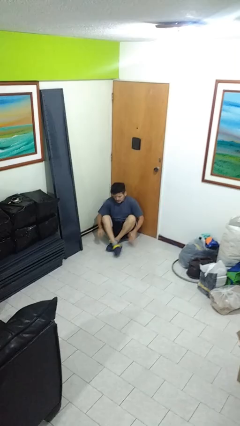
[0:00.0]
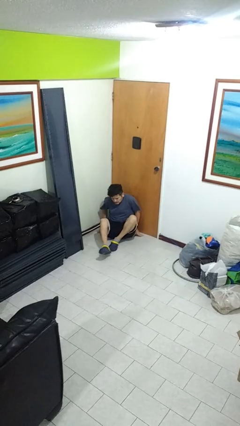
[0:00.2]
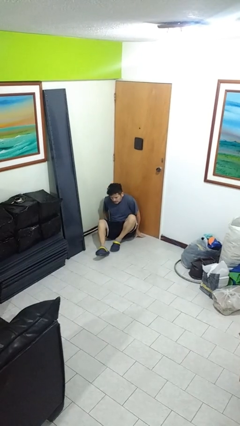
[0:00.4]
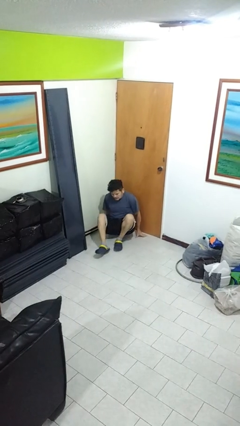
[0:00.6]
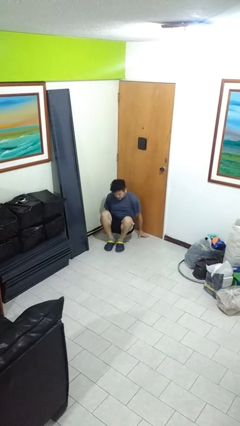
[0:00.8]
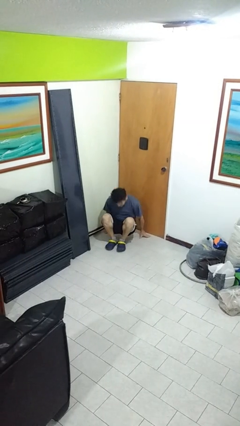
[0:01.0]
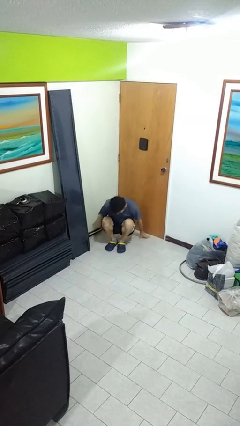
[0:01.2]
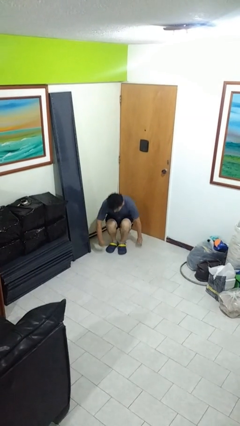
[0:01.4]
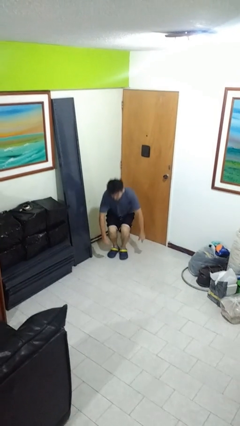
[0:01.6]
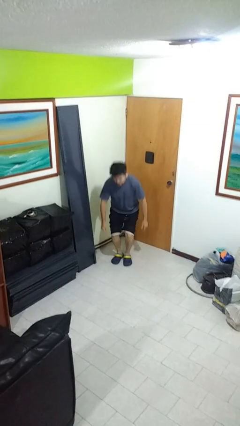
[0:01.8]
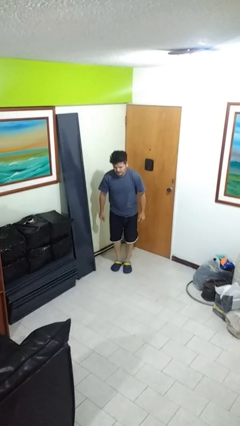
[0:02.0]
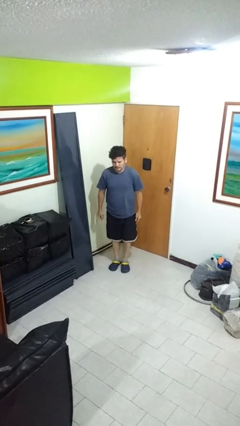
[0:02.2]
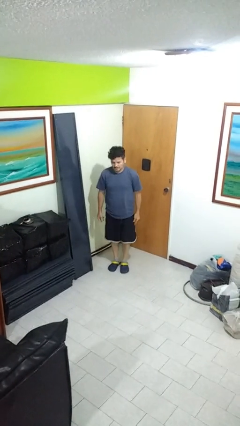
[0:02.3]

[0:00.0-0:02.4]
person stands up from floor

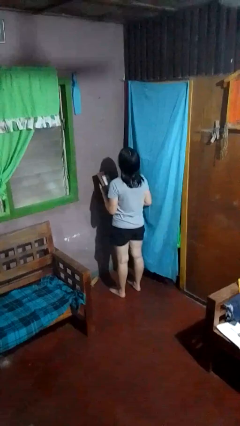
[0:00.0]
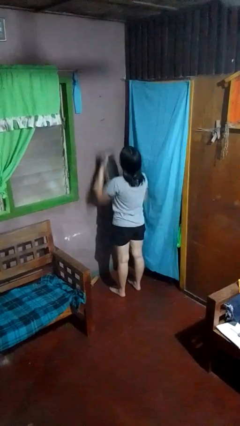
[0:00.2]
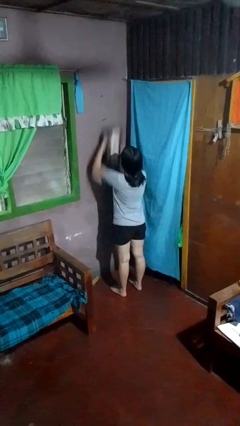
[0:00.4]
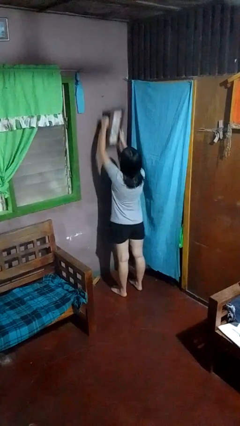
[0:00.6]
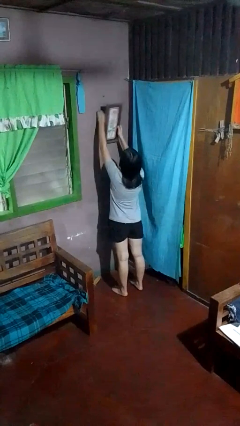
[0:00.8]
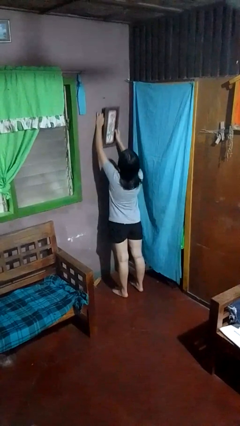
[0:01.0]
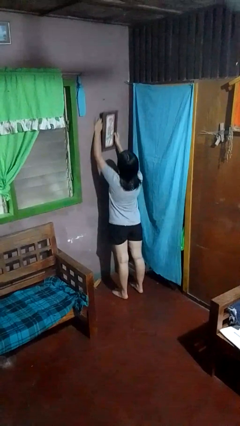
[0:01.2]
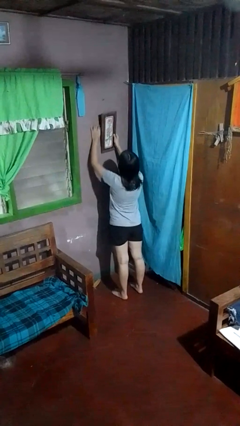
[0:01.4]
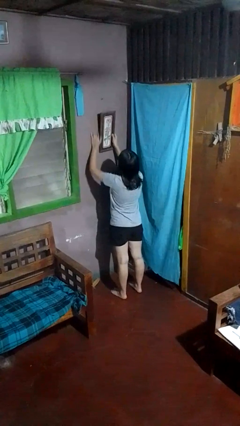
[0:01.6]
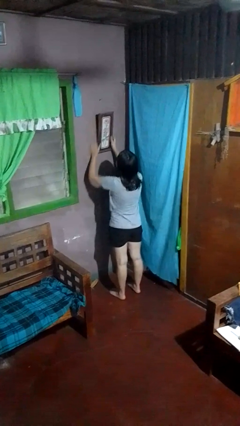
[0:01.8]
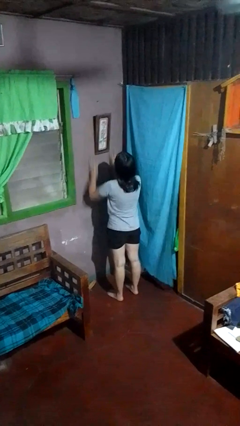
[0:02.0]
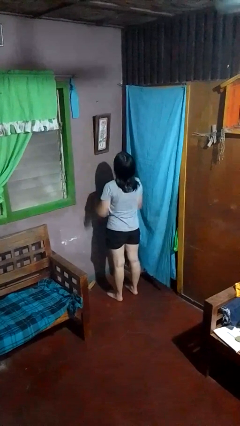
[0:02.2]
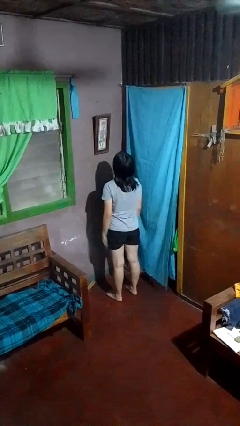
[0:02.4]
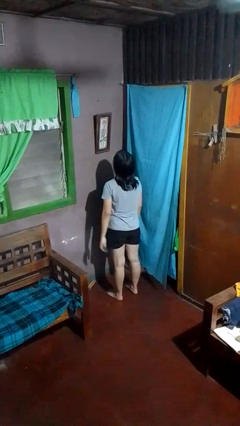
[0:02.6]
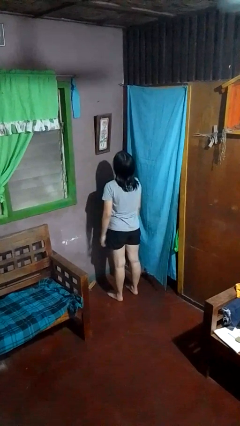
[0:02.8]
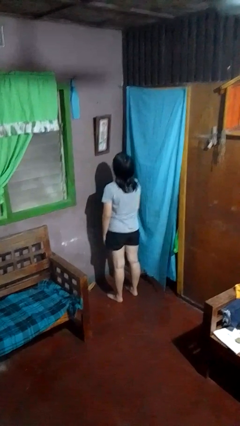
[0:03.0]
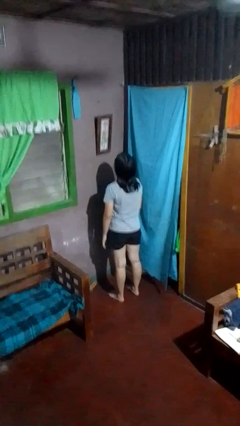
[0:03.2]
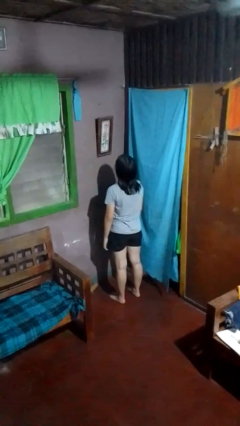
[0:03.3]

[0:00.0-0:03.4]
person puts up picture frame

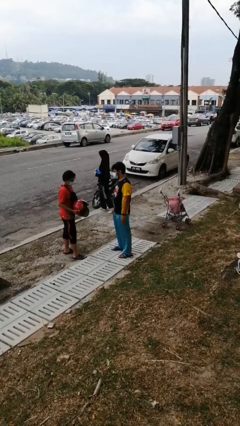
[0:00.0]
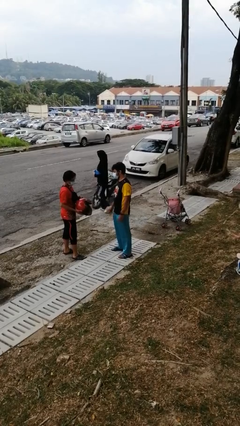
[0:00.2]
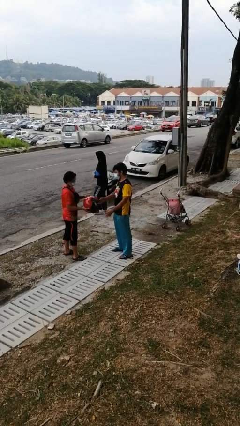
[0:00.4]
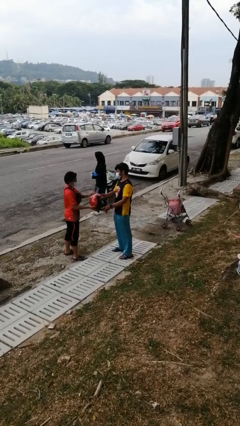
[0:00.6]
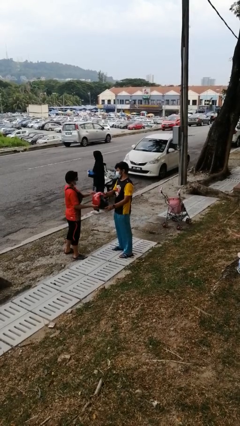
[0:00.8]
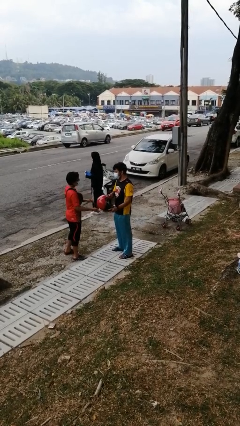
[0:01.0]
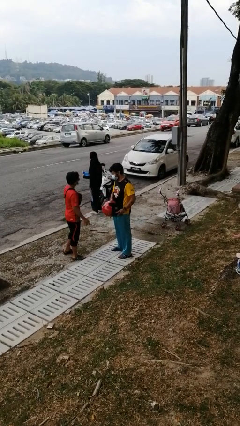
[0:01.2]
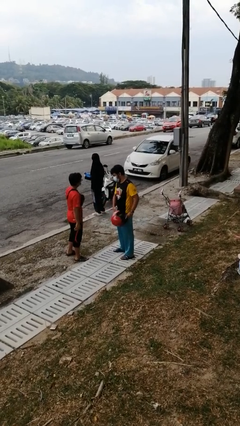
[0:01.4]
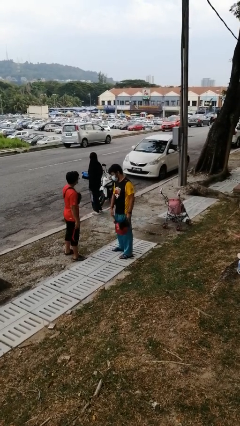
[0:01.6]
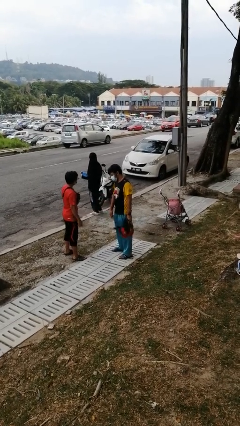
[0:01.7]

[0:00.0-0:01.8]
person transfers object to person

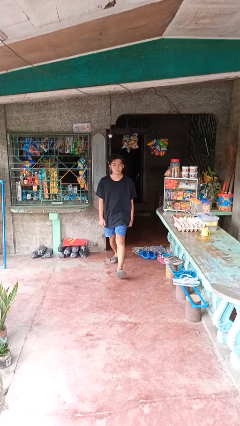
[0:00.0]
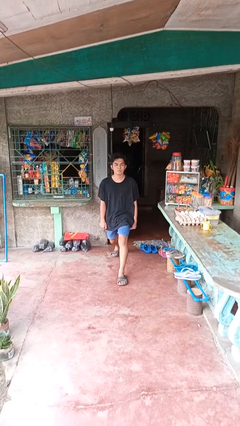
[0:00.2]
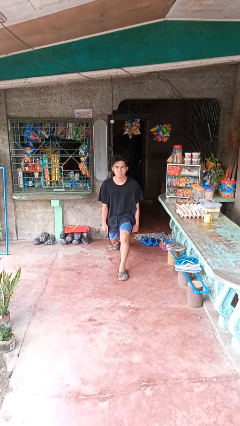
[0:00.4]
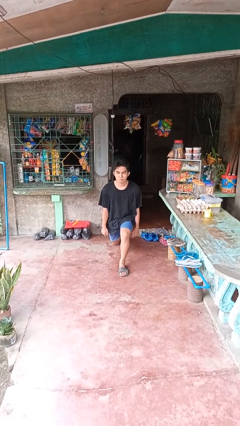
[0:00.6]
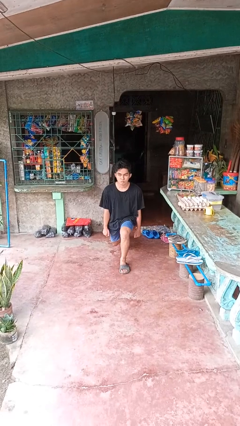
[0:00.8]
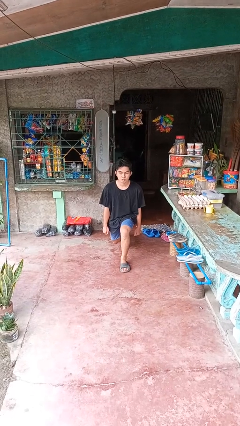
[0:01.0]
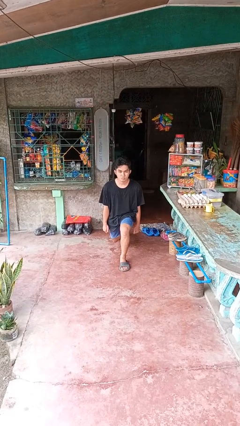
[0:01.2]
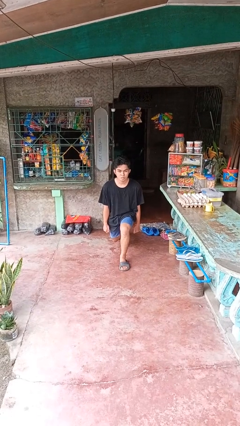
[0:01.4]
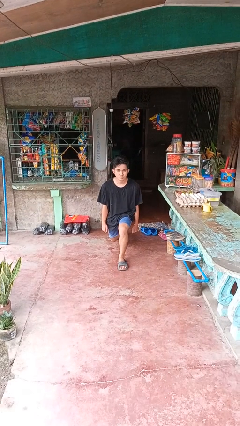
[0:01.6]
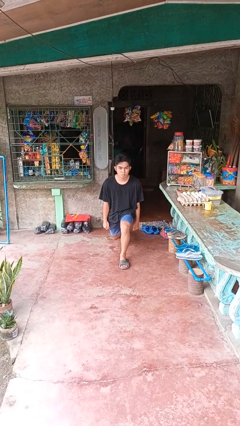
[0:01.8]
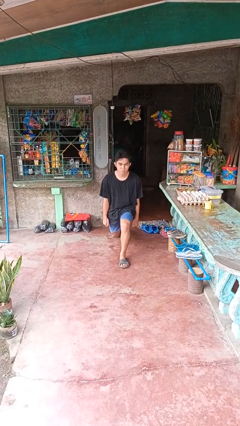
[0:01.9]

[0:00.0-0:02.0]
person exercises with lunges

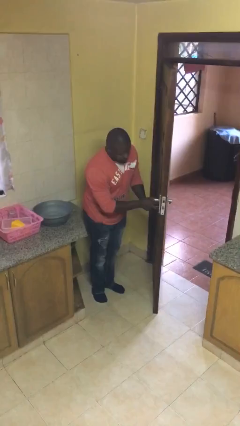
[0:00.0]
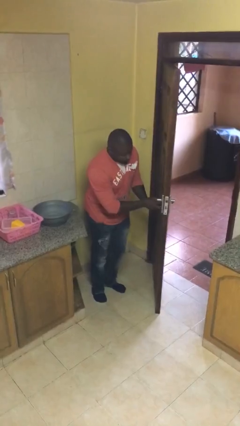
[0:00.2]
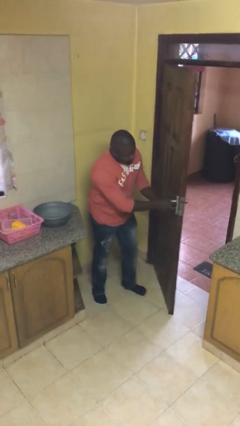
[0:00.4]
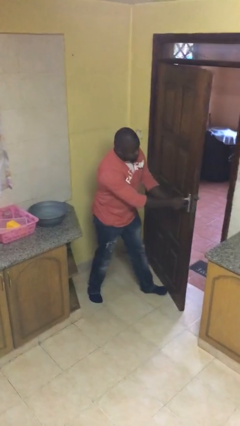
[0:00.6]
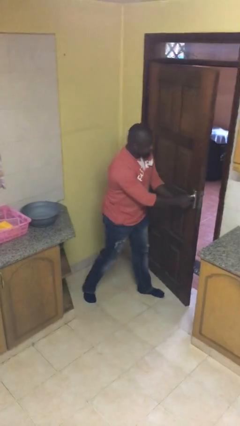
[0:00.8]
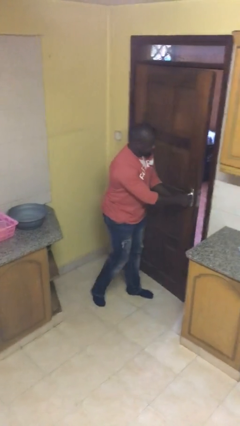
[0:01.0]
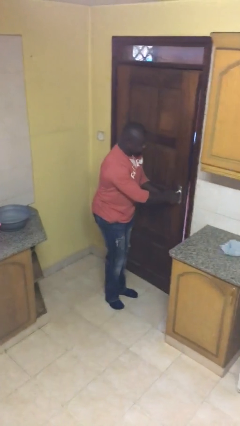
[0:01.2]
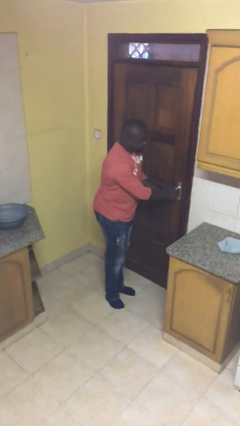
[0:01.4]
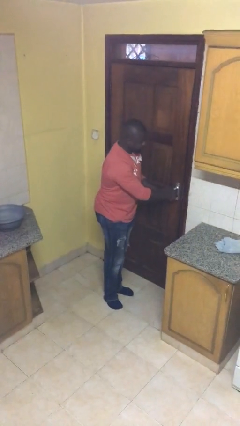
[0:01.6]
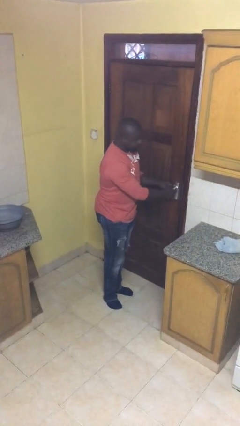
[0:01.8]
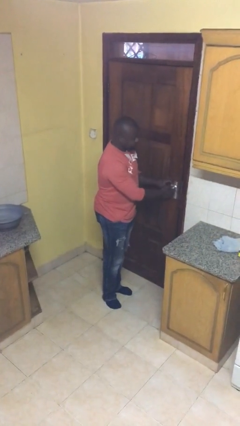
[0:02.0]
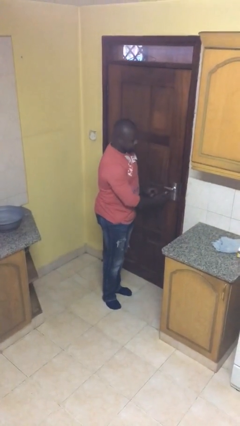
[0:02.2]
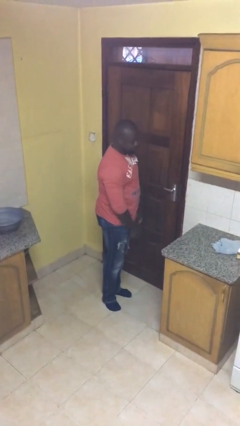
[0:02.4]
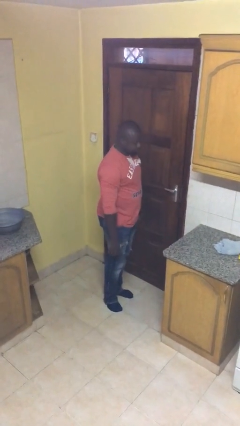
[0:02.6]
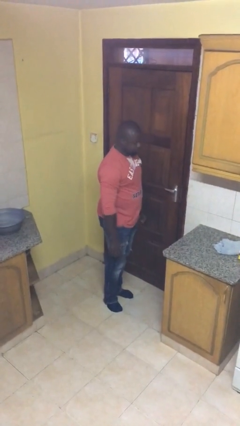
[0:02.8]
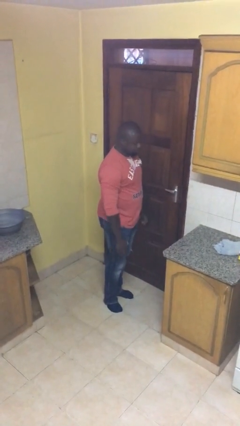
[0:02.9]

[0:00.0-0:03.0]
person closes facility door

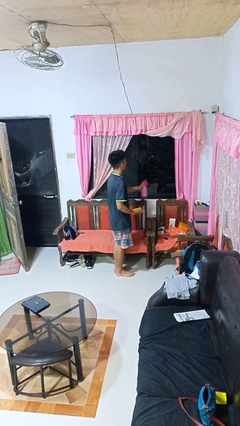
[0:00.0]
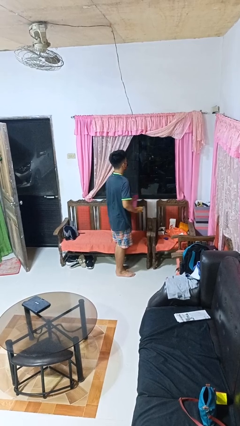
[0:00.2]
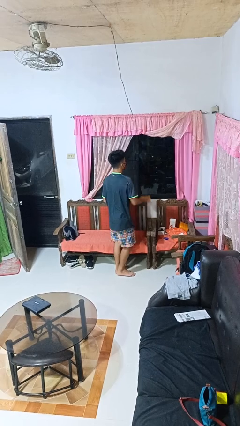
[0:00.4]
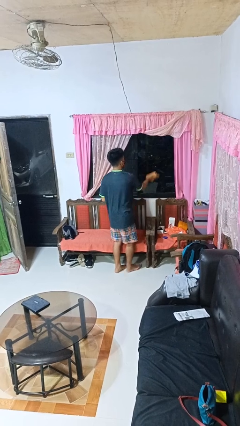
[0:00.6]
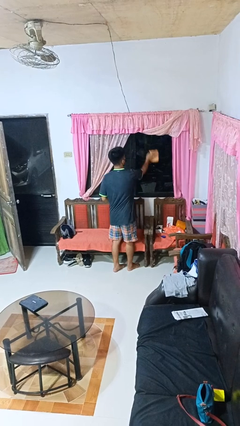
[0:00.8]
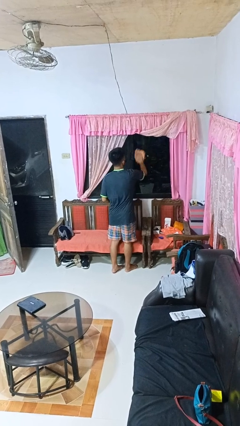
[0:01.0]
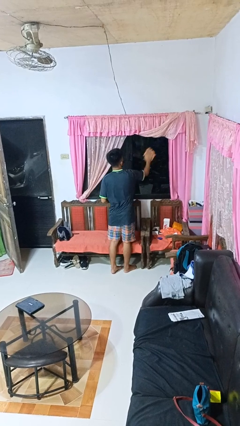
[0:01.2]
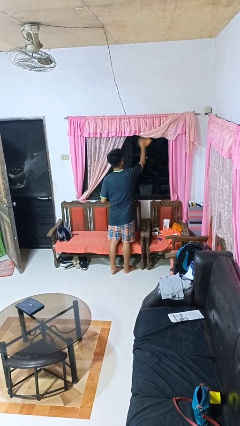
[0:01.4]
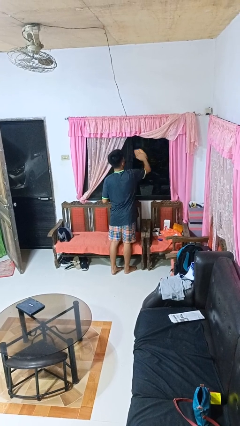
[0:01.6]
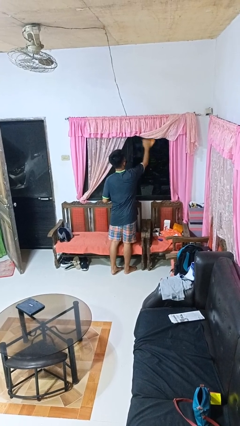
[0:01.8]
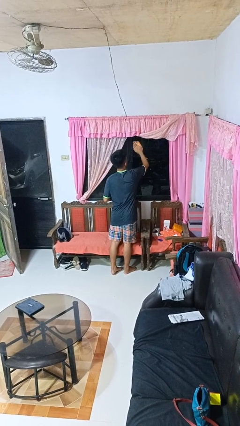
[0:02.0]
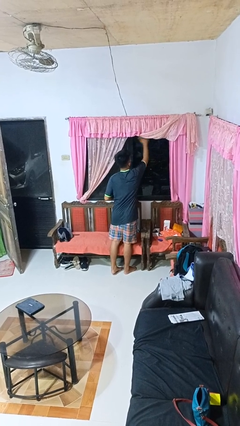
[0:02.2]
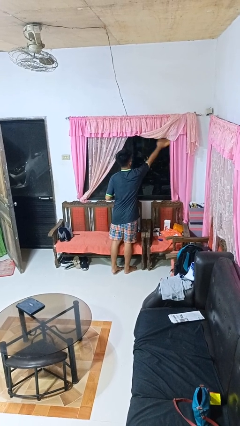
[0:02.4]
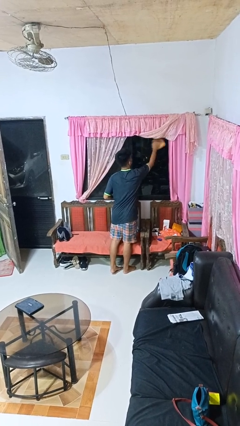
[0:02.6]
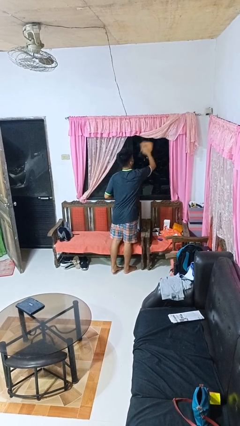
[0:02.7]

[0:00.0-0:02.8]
person washes window

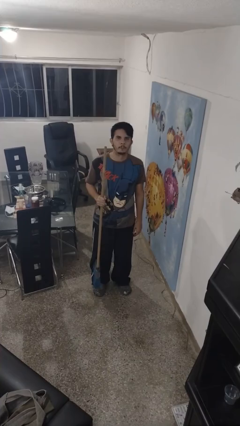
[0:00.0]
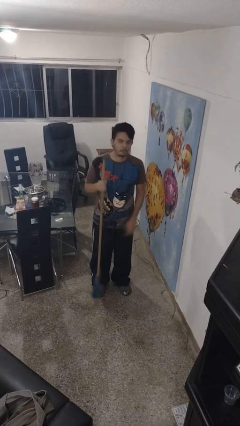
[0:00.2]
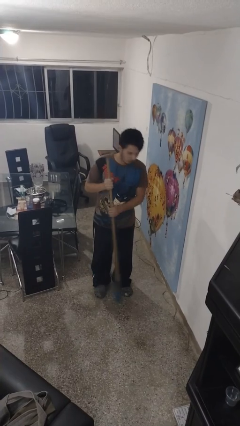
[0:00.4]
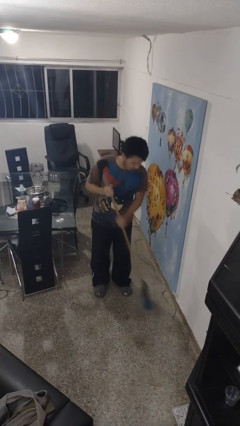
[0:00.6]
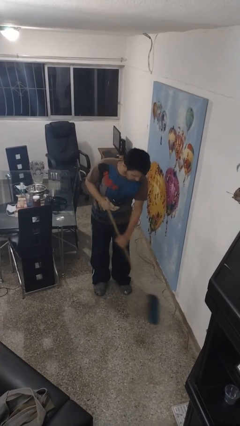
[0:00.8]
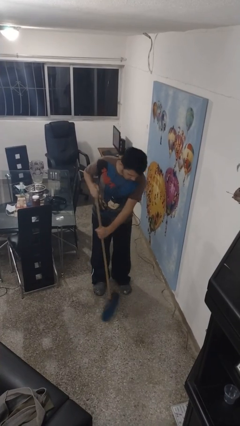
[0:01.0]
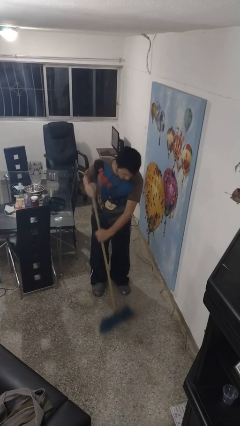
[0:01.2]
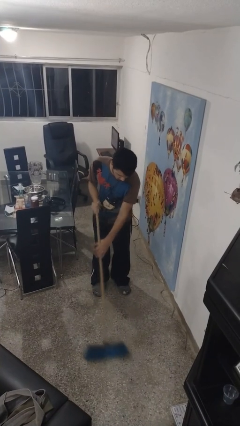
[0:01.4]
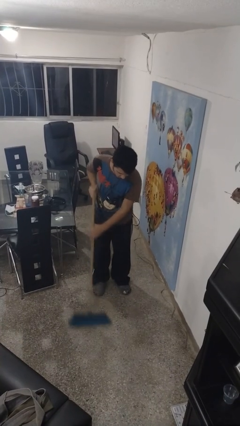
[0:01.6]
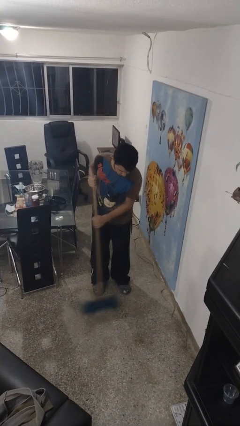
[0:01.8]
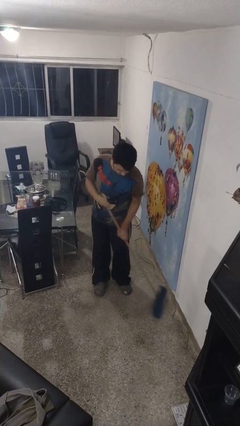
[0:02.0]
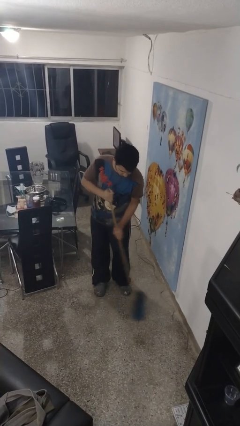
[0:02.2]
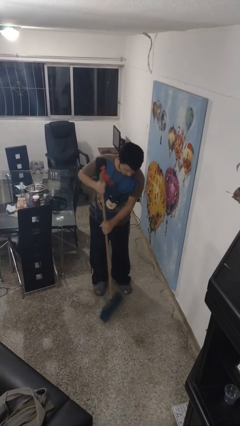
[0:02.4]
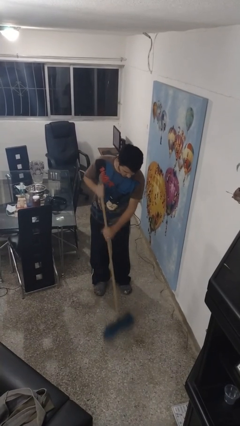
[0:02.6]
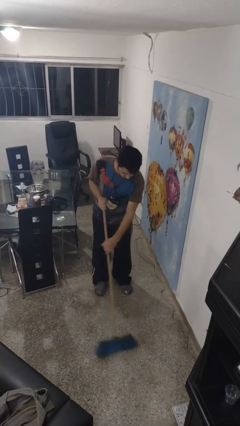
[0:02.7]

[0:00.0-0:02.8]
person sweeps floor
